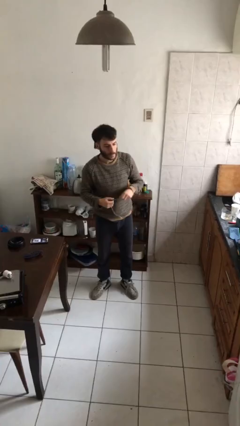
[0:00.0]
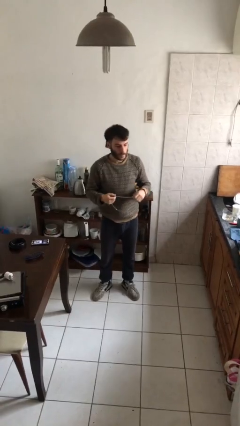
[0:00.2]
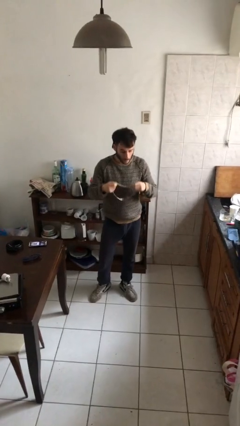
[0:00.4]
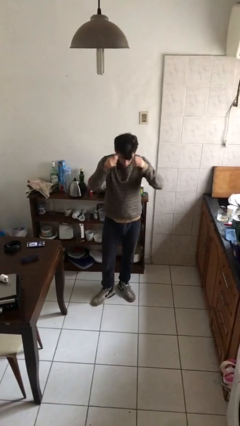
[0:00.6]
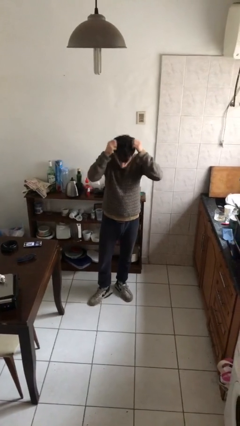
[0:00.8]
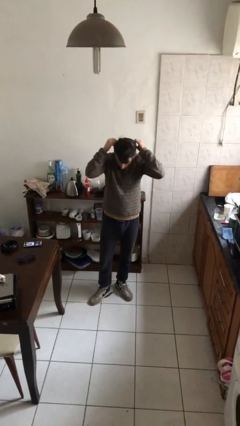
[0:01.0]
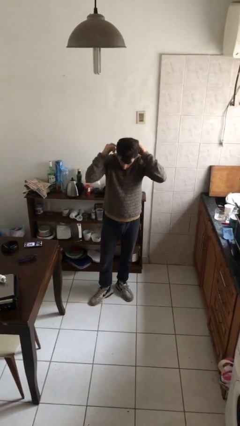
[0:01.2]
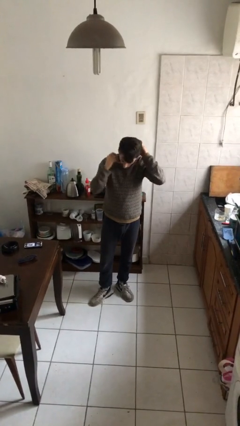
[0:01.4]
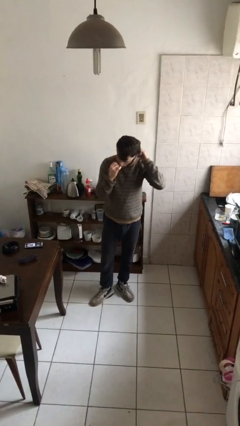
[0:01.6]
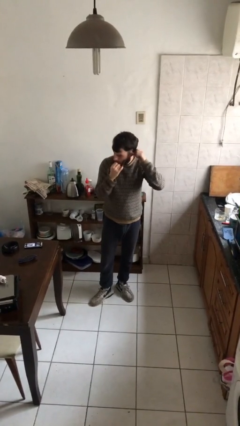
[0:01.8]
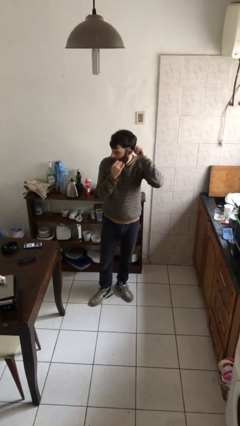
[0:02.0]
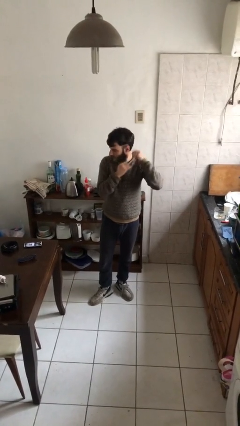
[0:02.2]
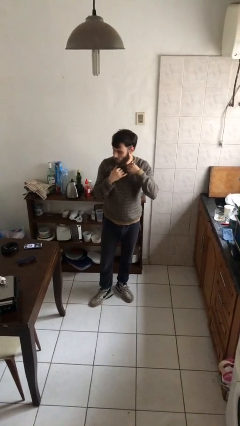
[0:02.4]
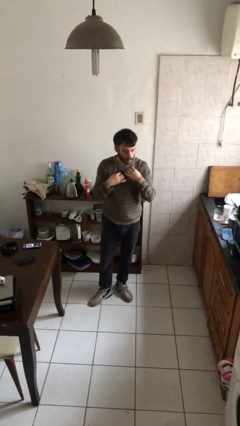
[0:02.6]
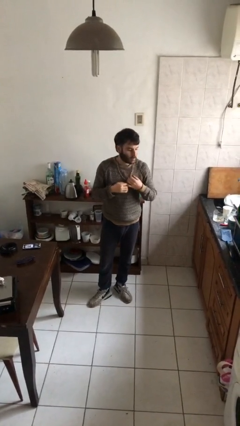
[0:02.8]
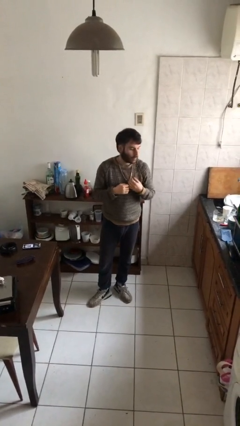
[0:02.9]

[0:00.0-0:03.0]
person puts on necklace

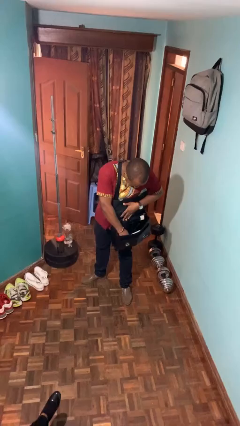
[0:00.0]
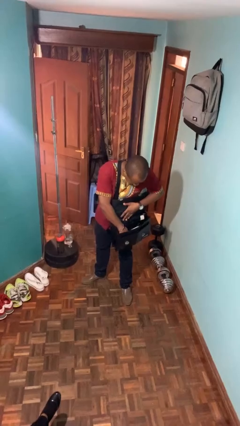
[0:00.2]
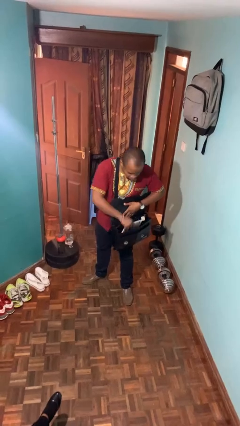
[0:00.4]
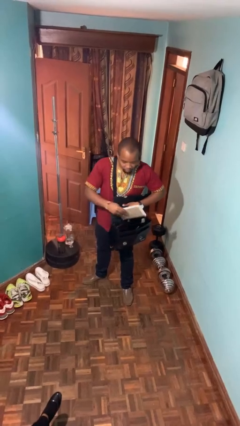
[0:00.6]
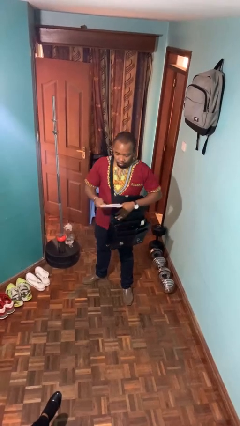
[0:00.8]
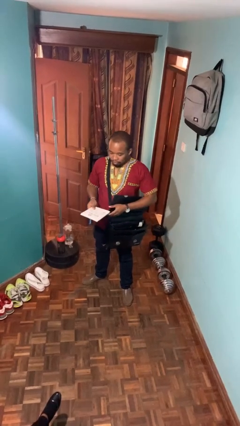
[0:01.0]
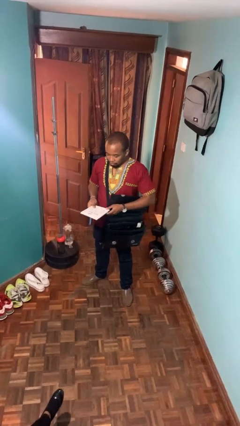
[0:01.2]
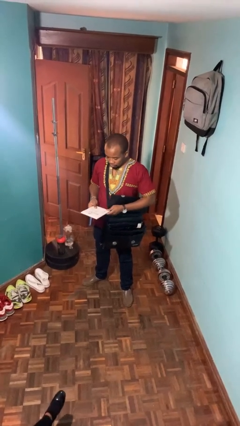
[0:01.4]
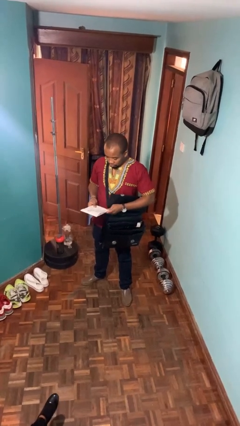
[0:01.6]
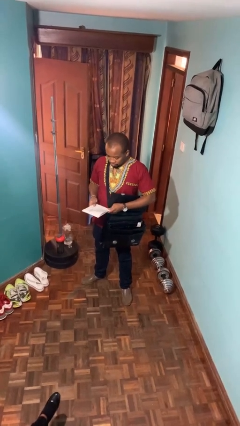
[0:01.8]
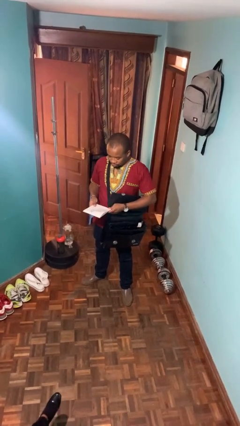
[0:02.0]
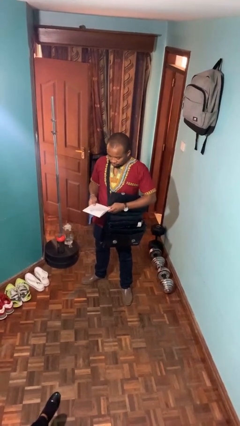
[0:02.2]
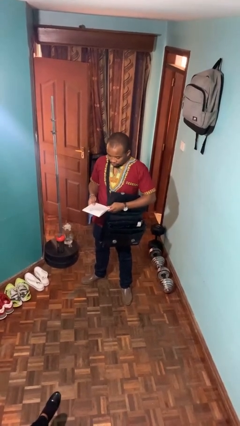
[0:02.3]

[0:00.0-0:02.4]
person takes object from purse

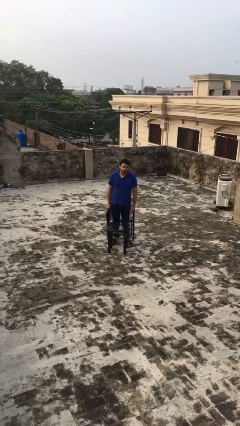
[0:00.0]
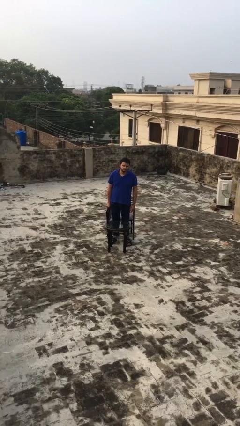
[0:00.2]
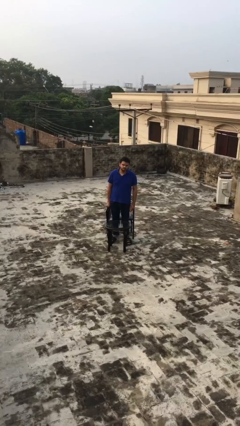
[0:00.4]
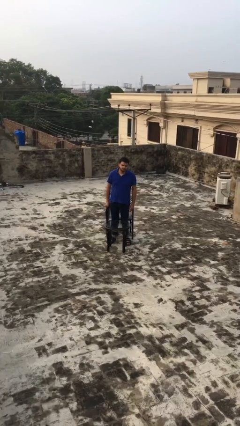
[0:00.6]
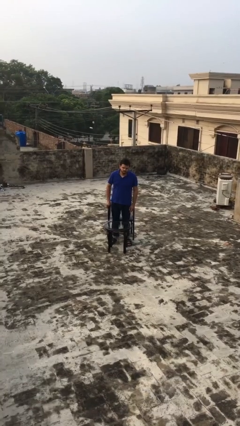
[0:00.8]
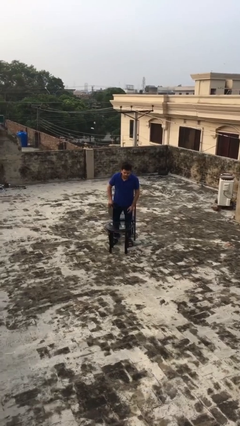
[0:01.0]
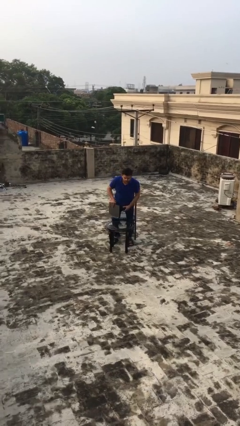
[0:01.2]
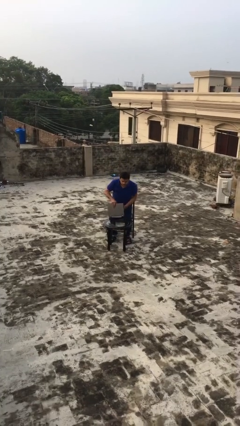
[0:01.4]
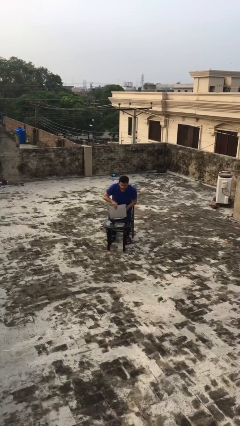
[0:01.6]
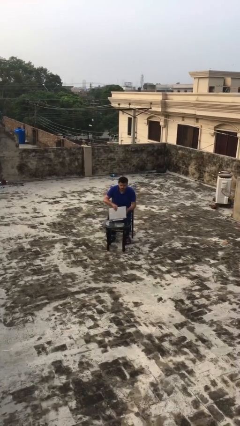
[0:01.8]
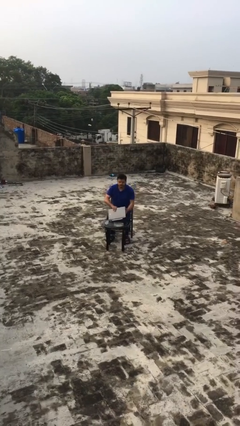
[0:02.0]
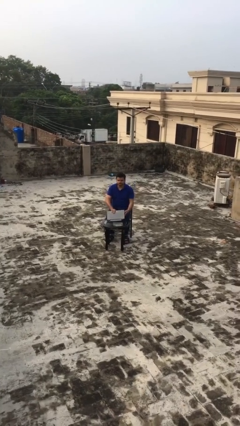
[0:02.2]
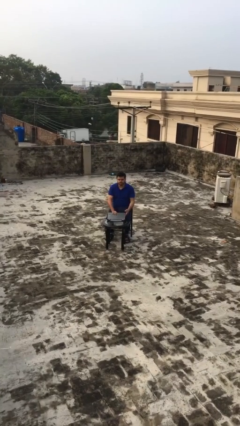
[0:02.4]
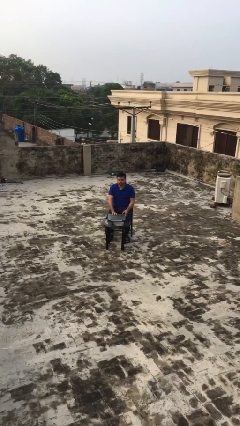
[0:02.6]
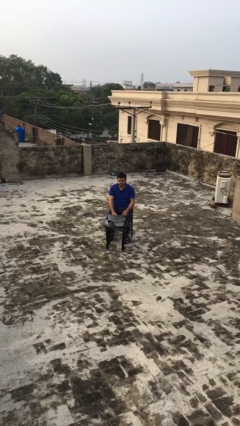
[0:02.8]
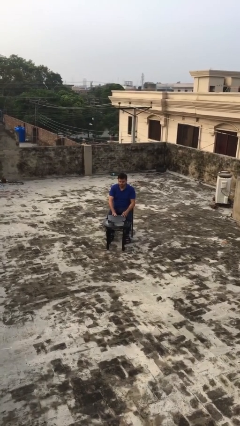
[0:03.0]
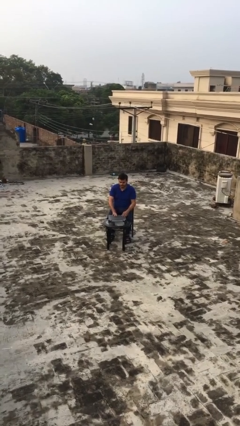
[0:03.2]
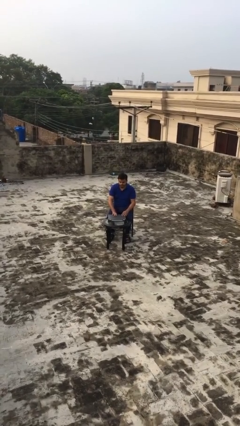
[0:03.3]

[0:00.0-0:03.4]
person sits down

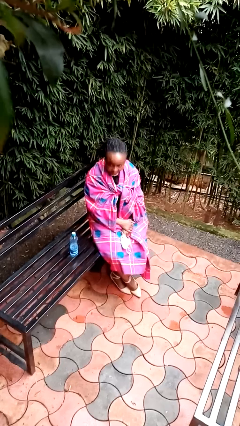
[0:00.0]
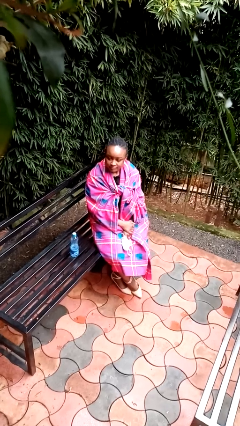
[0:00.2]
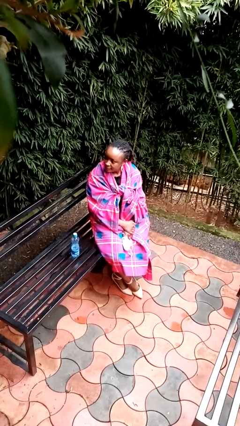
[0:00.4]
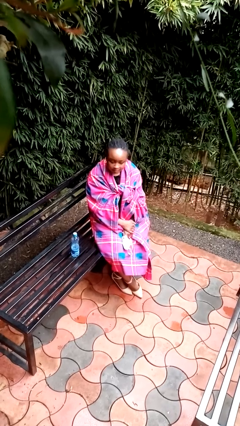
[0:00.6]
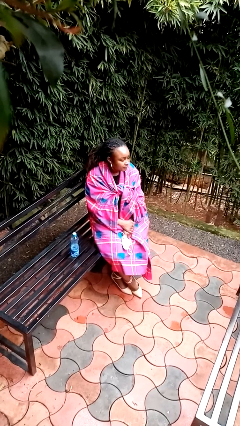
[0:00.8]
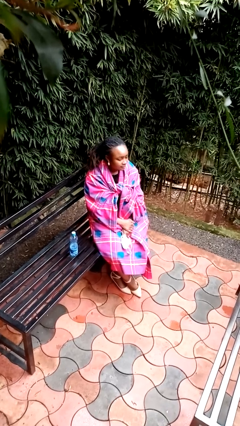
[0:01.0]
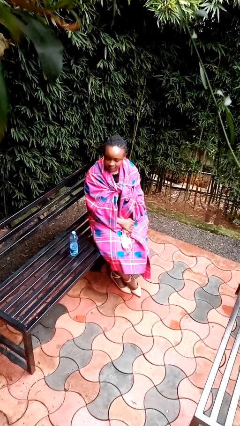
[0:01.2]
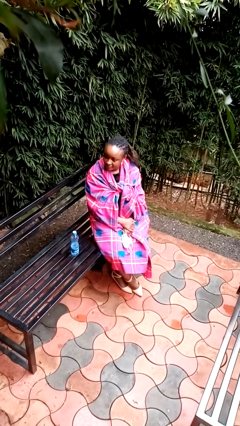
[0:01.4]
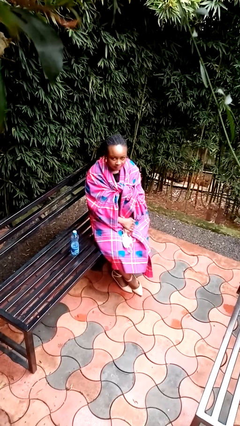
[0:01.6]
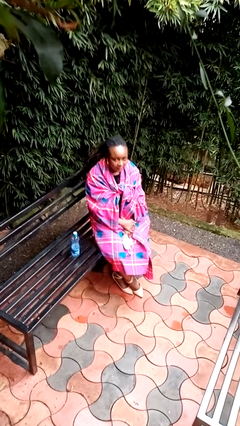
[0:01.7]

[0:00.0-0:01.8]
person shakes head

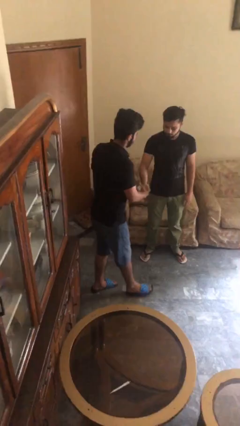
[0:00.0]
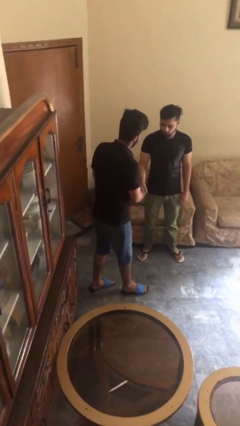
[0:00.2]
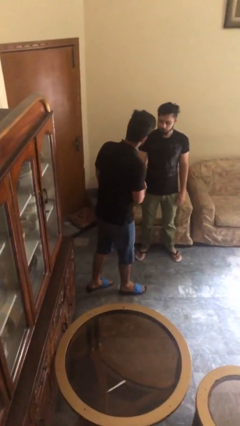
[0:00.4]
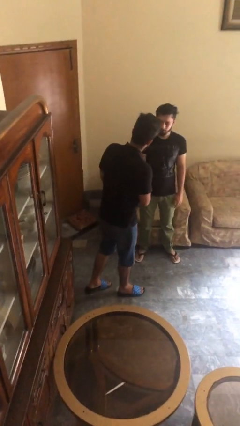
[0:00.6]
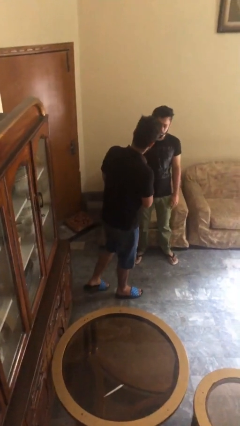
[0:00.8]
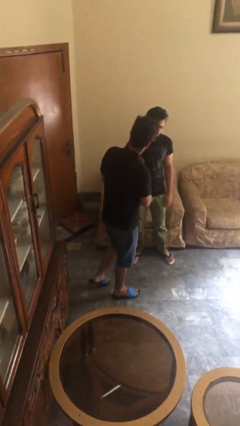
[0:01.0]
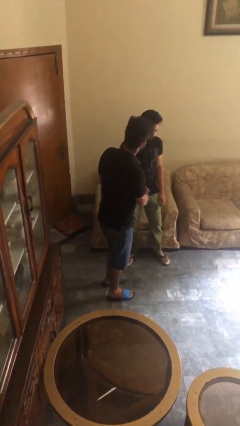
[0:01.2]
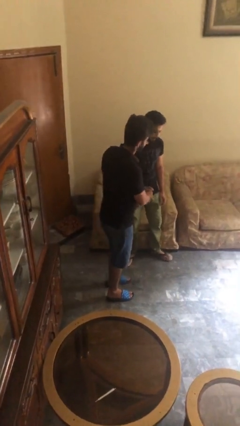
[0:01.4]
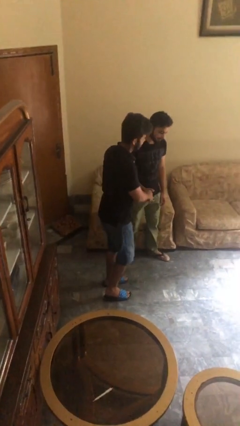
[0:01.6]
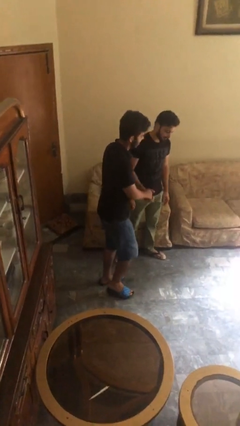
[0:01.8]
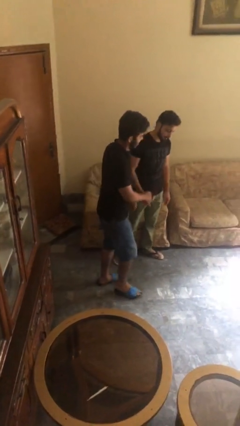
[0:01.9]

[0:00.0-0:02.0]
person shakes hand

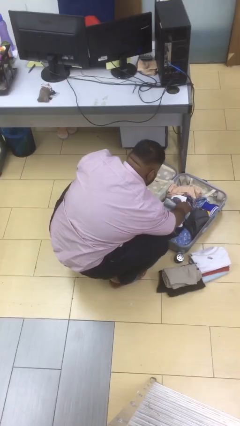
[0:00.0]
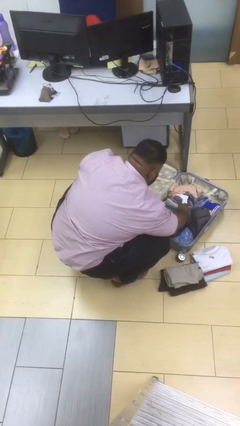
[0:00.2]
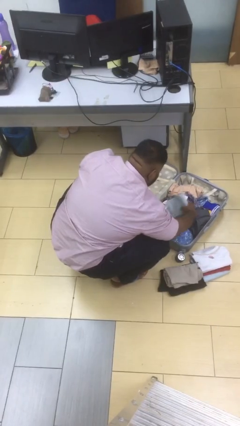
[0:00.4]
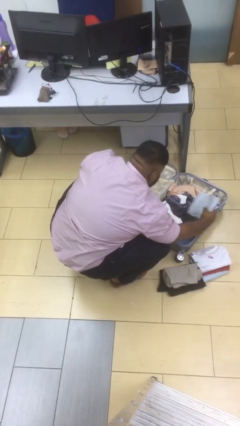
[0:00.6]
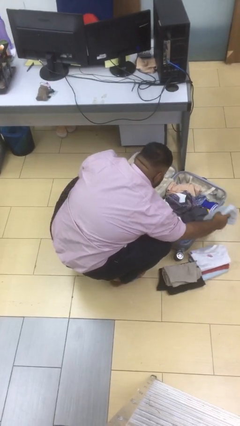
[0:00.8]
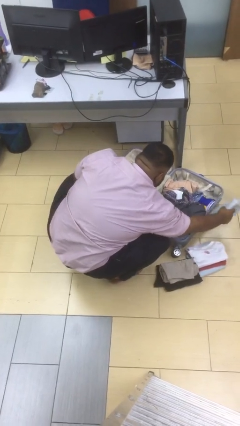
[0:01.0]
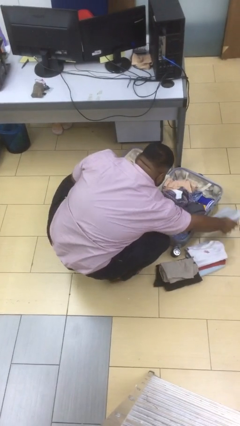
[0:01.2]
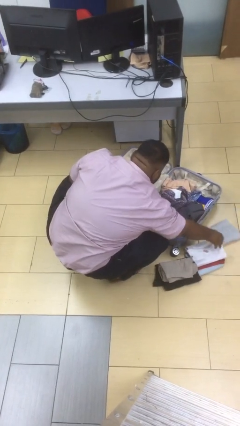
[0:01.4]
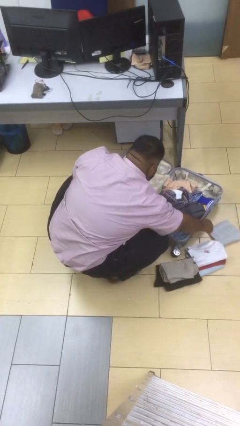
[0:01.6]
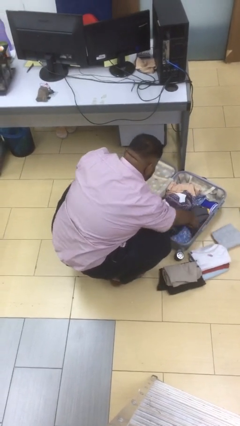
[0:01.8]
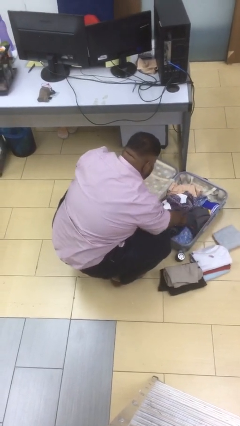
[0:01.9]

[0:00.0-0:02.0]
person unloads clothes from suitcase

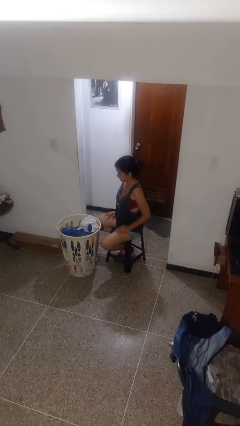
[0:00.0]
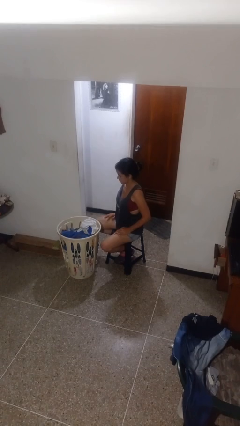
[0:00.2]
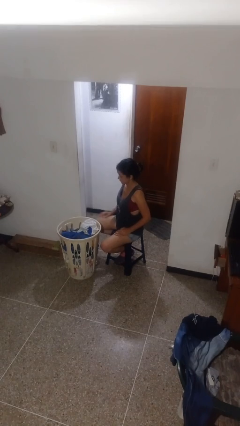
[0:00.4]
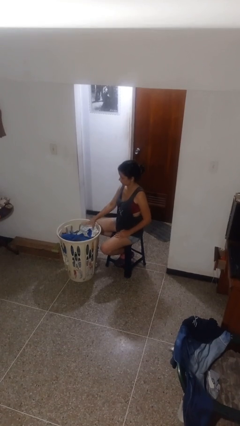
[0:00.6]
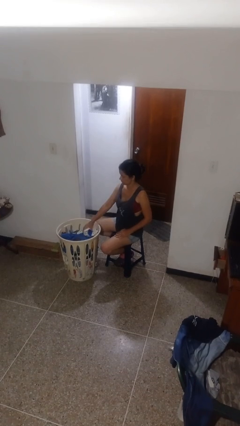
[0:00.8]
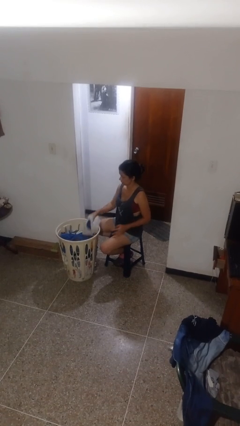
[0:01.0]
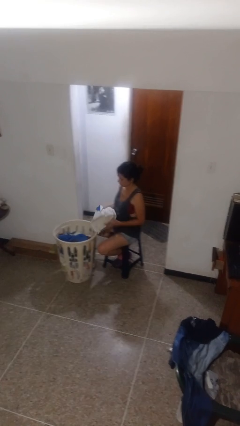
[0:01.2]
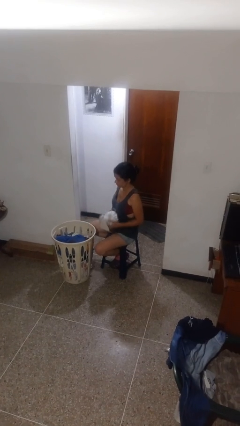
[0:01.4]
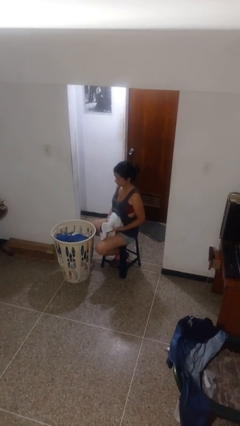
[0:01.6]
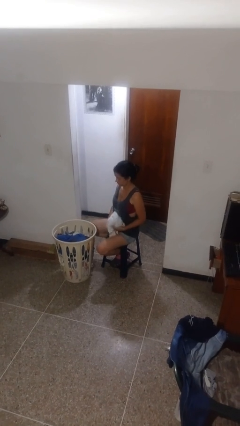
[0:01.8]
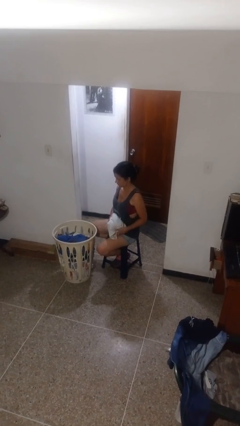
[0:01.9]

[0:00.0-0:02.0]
person takes object from basket

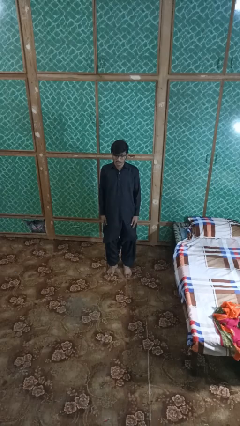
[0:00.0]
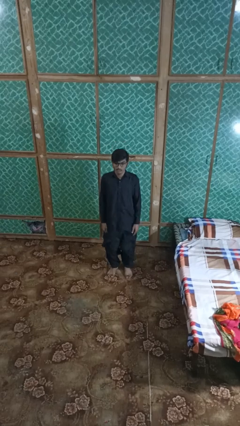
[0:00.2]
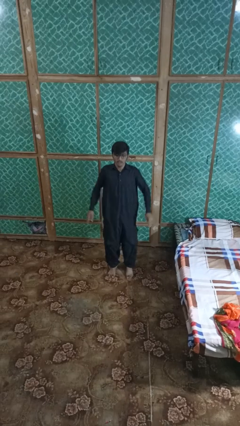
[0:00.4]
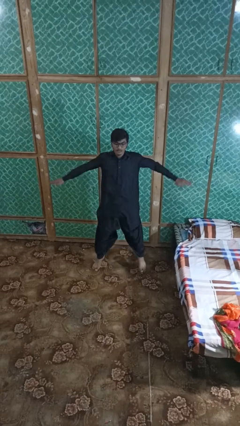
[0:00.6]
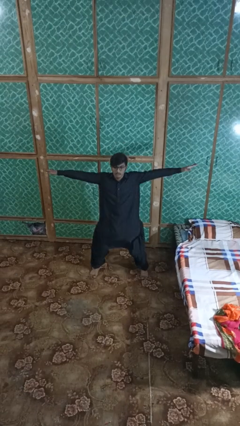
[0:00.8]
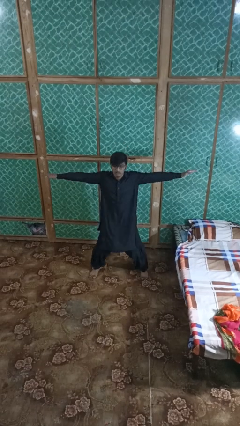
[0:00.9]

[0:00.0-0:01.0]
person exercises with jumping jacks
